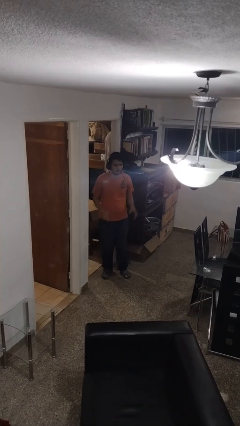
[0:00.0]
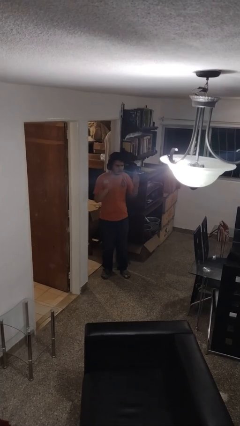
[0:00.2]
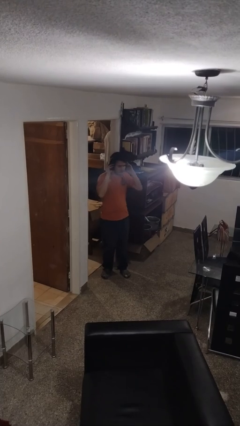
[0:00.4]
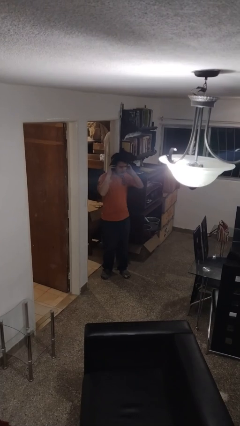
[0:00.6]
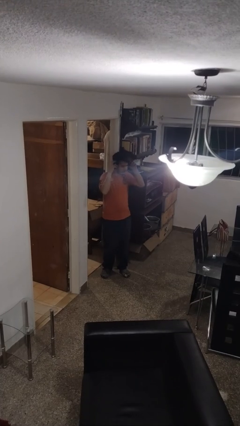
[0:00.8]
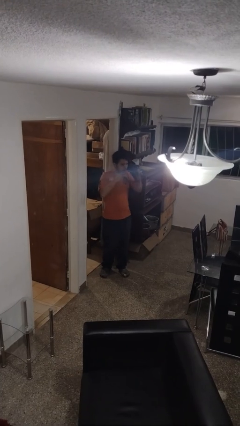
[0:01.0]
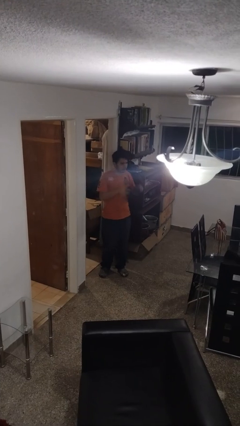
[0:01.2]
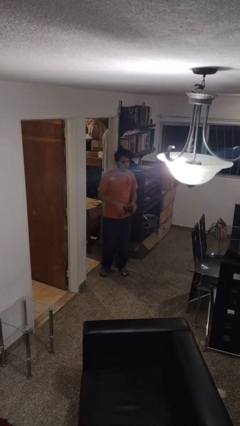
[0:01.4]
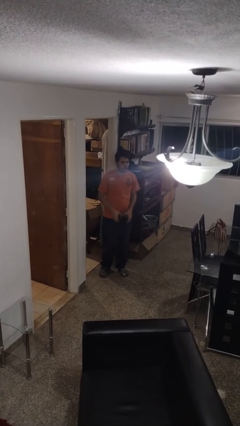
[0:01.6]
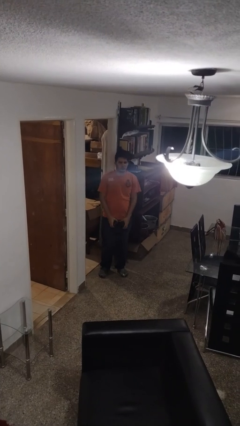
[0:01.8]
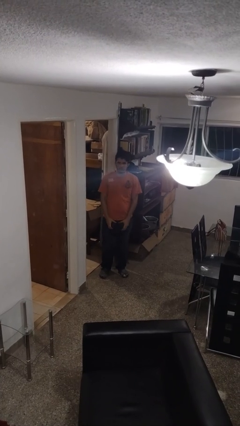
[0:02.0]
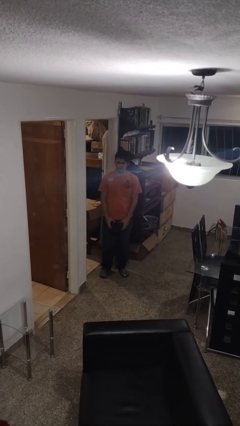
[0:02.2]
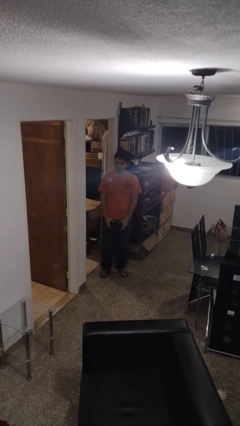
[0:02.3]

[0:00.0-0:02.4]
person takes off headphones

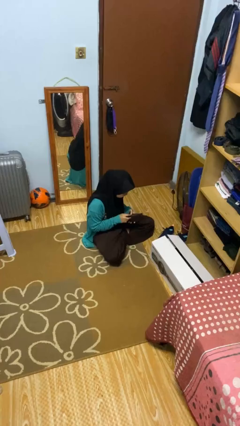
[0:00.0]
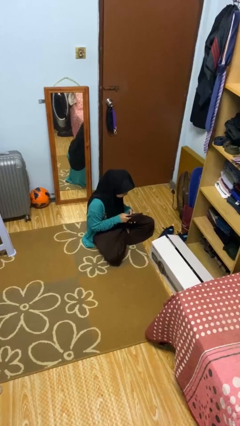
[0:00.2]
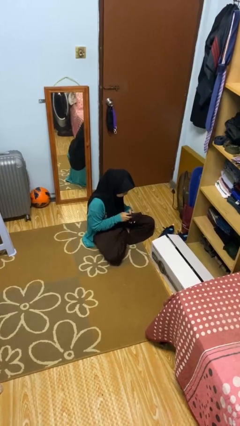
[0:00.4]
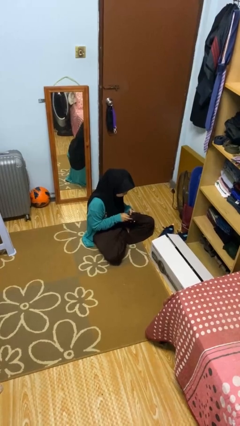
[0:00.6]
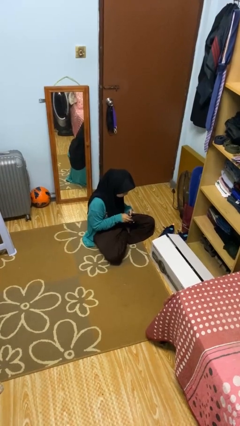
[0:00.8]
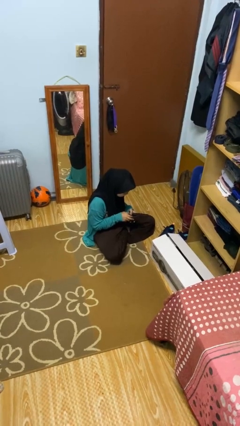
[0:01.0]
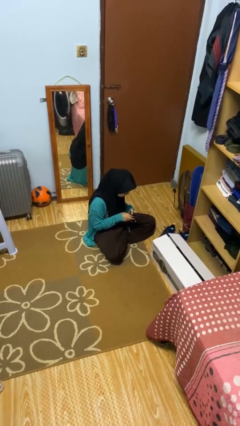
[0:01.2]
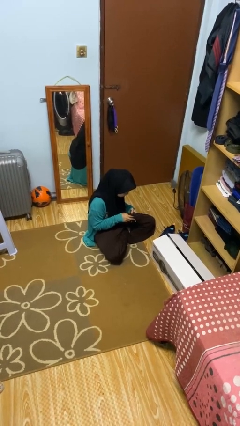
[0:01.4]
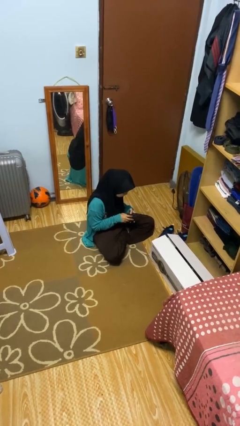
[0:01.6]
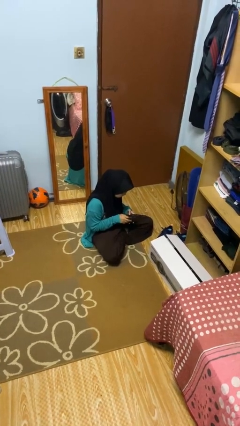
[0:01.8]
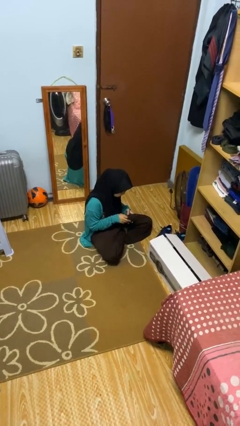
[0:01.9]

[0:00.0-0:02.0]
person searches in purse

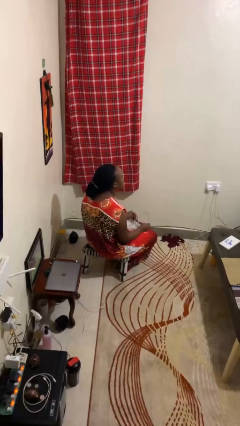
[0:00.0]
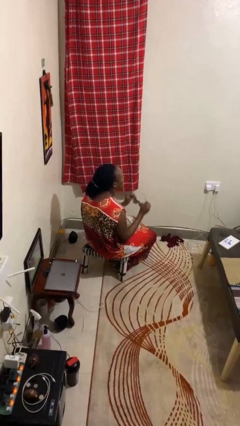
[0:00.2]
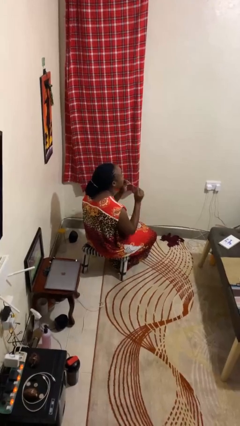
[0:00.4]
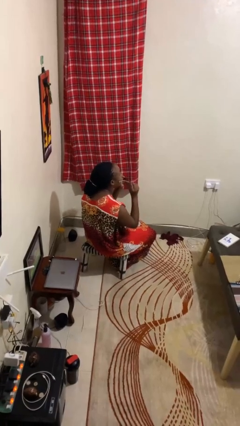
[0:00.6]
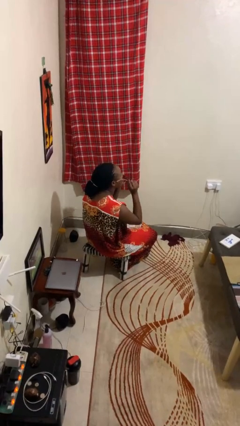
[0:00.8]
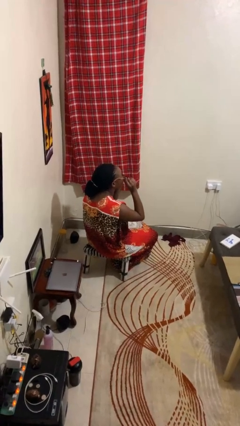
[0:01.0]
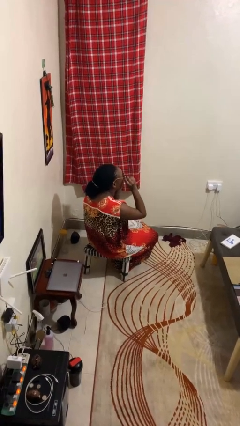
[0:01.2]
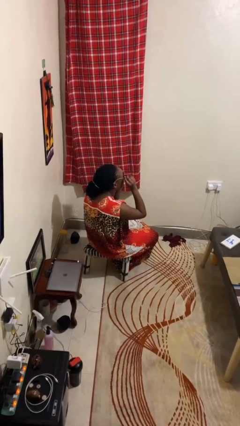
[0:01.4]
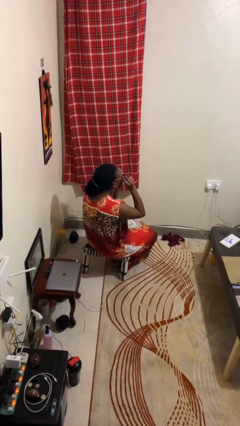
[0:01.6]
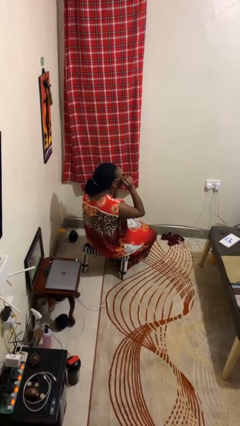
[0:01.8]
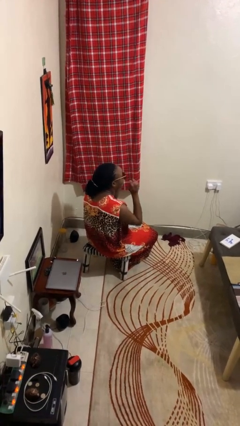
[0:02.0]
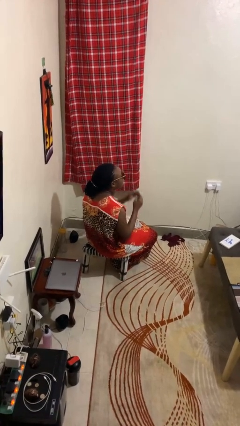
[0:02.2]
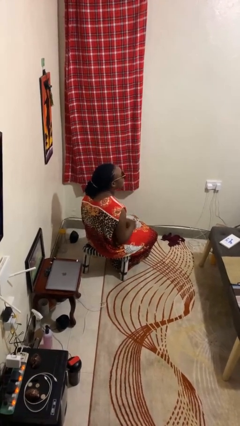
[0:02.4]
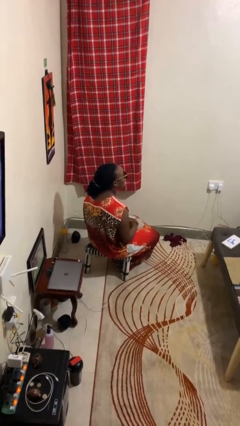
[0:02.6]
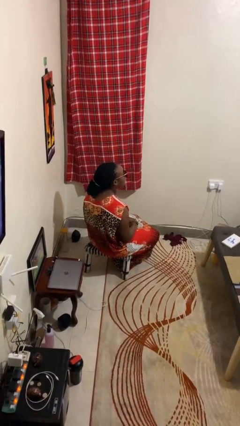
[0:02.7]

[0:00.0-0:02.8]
person puts on sunglasses

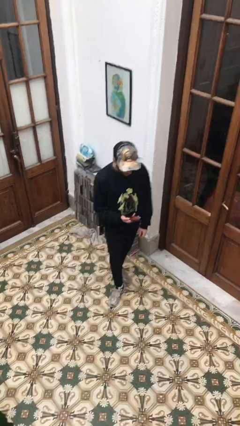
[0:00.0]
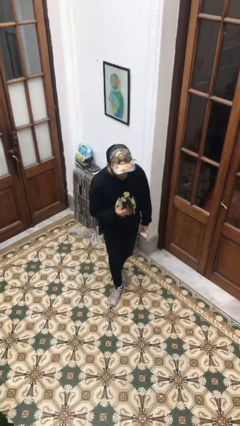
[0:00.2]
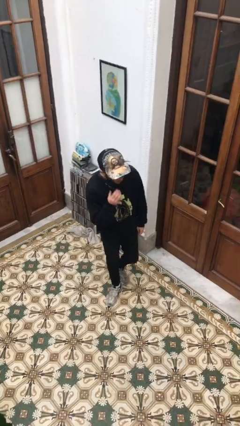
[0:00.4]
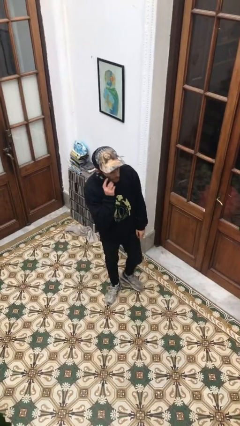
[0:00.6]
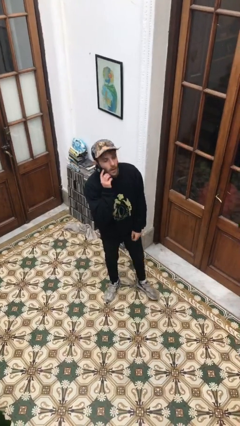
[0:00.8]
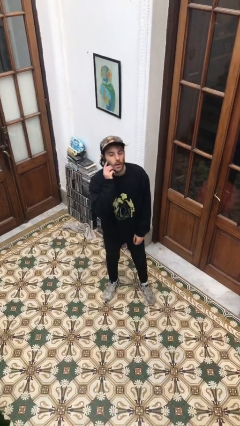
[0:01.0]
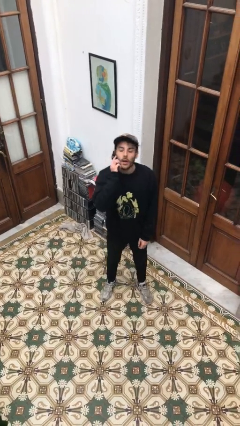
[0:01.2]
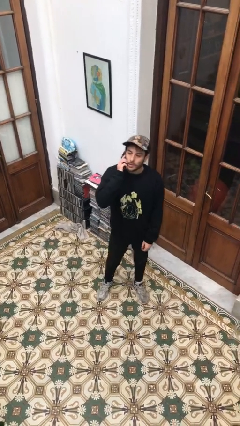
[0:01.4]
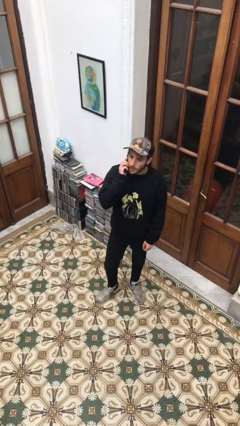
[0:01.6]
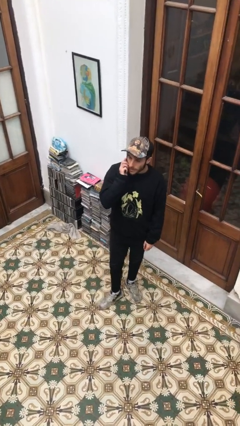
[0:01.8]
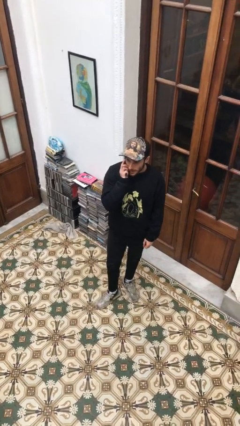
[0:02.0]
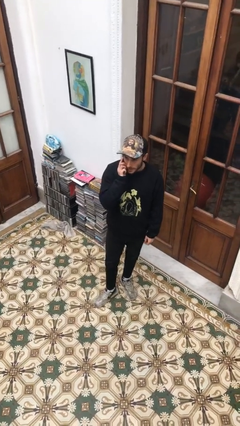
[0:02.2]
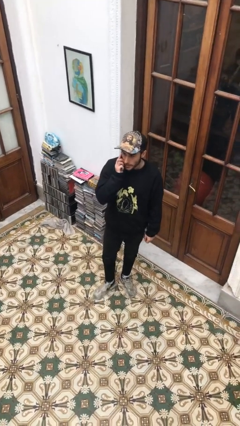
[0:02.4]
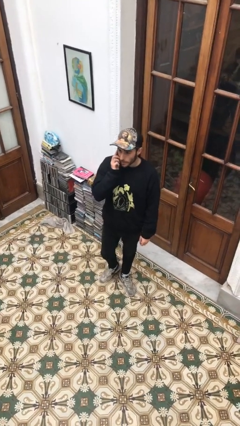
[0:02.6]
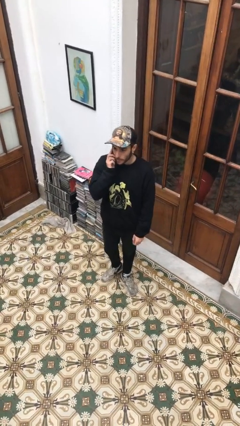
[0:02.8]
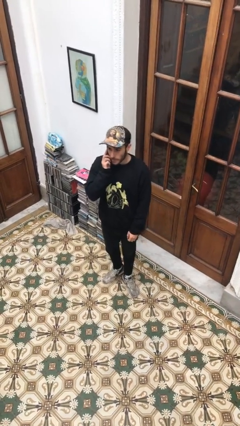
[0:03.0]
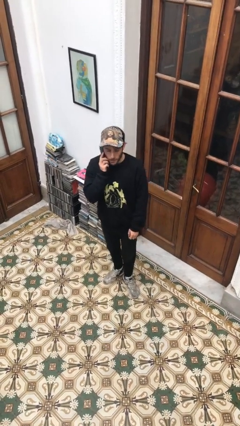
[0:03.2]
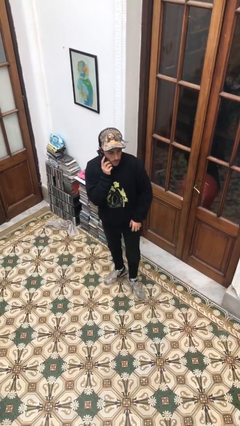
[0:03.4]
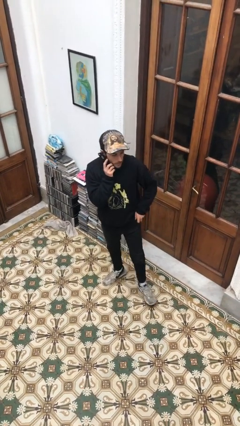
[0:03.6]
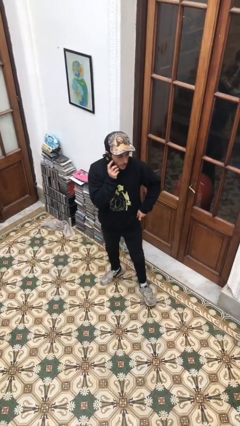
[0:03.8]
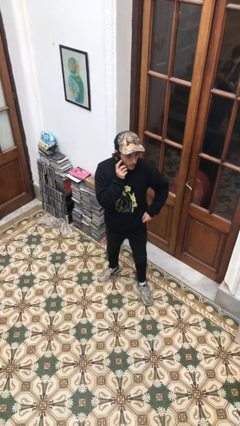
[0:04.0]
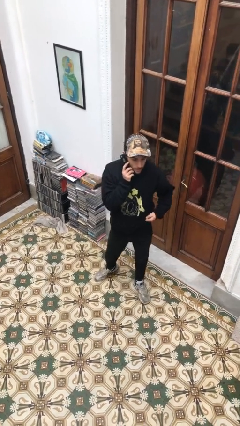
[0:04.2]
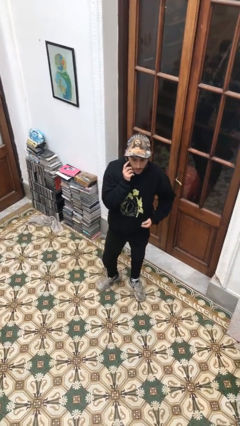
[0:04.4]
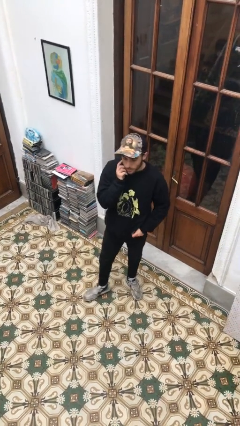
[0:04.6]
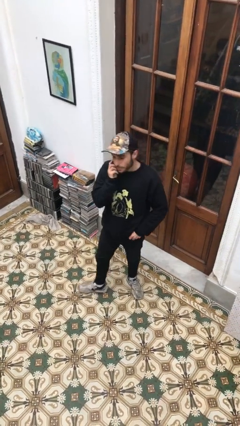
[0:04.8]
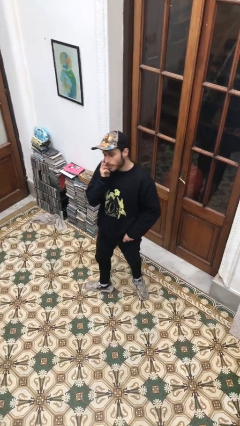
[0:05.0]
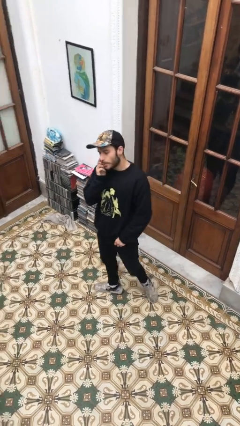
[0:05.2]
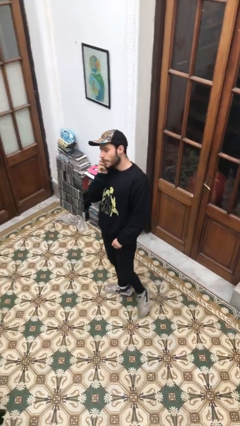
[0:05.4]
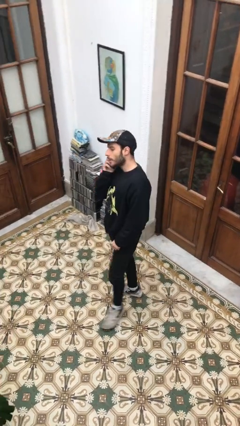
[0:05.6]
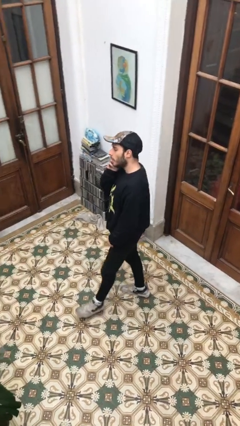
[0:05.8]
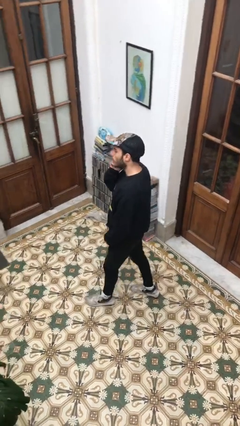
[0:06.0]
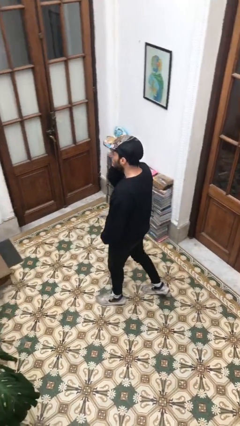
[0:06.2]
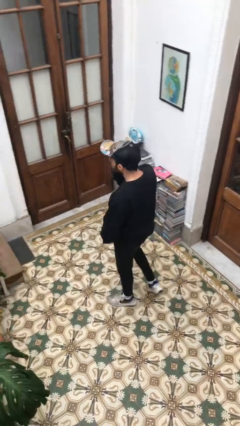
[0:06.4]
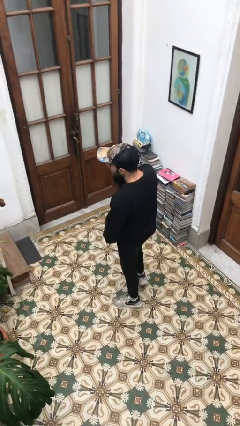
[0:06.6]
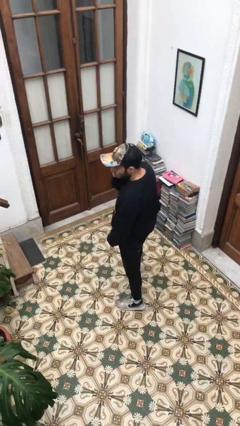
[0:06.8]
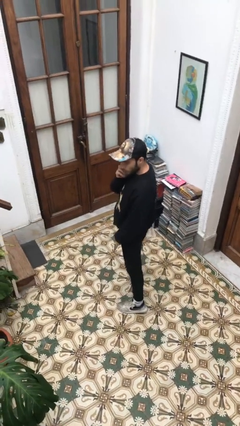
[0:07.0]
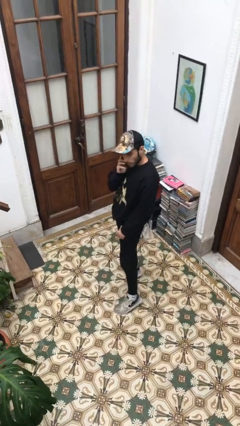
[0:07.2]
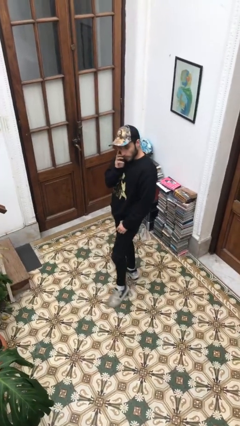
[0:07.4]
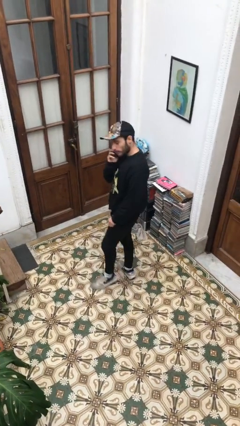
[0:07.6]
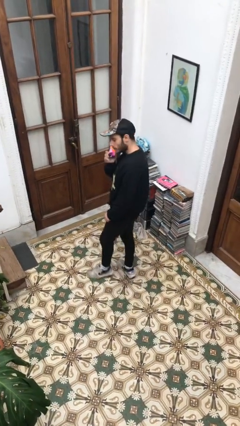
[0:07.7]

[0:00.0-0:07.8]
person talks on phone

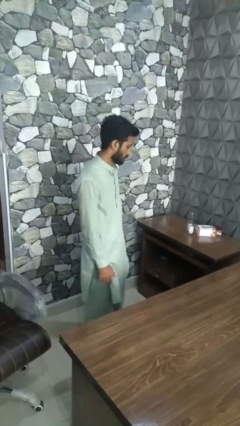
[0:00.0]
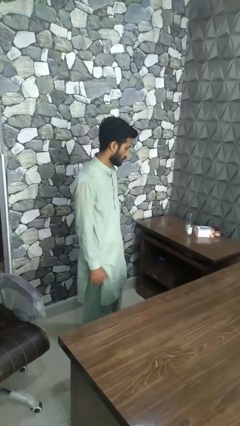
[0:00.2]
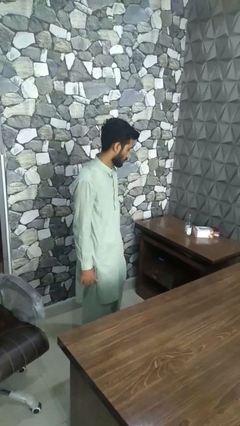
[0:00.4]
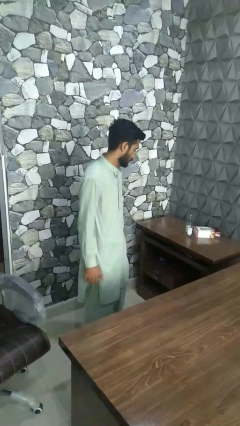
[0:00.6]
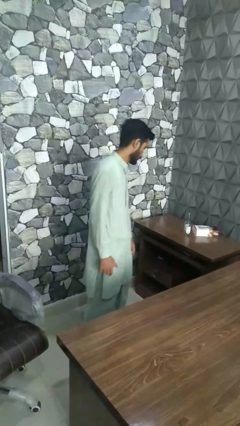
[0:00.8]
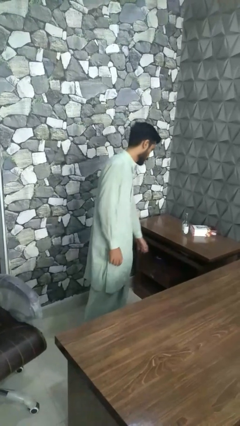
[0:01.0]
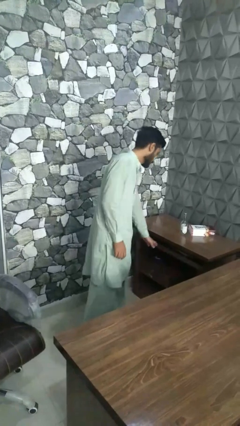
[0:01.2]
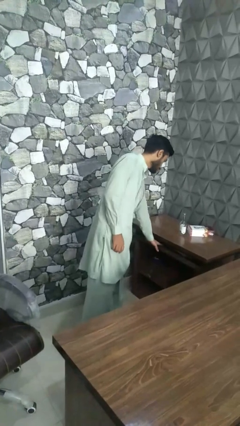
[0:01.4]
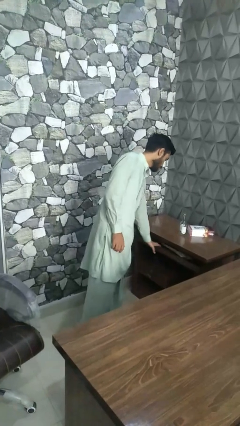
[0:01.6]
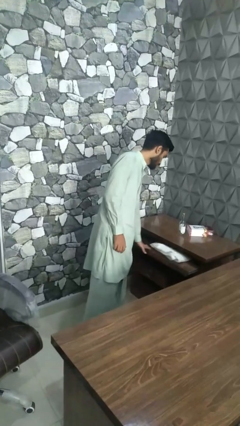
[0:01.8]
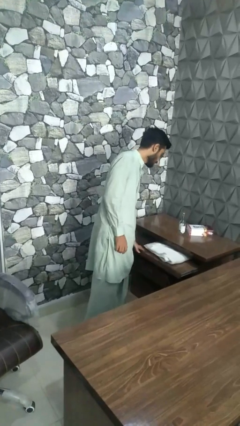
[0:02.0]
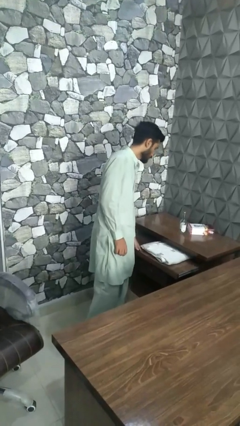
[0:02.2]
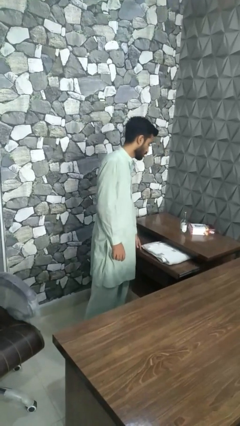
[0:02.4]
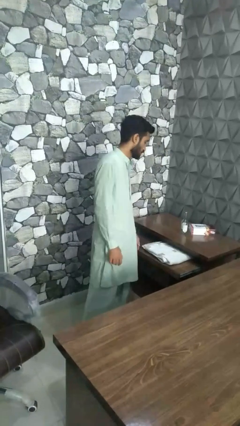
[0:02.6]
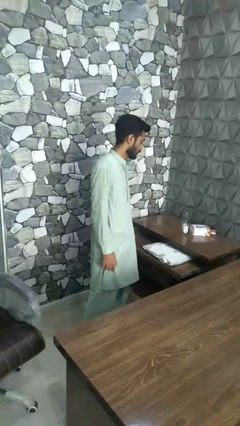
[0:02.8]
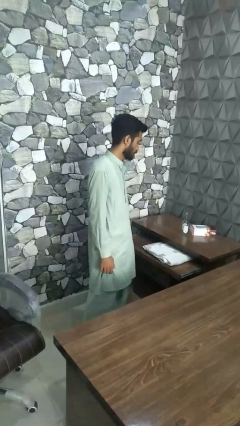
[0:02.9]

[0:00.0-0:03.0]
person opens dresser drawer
